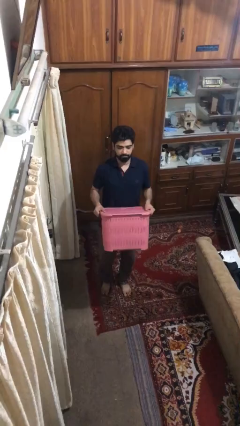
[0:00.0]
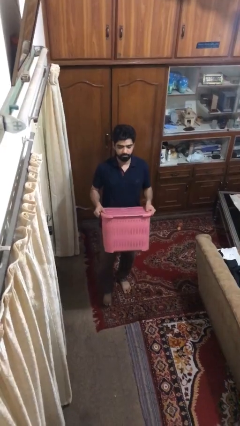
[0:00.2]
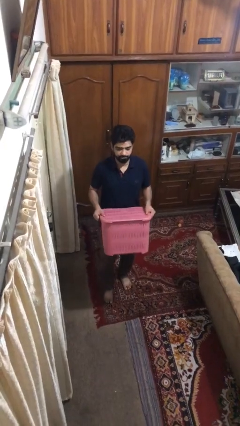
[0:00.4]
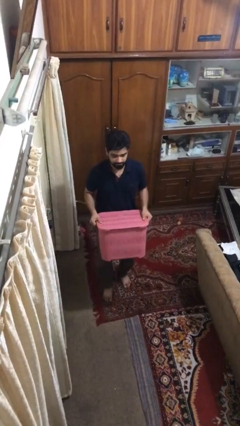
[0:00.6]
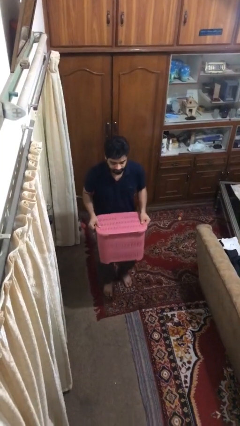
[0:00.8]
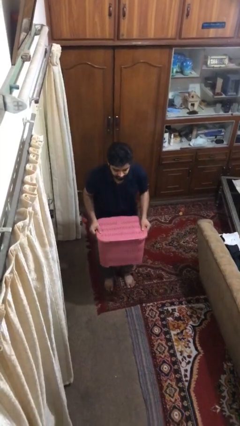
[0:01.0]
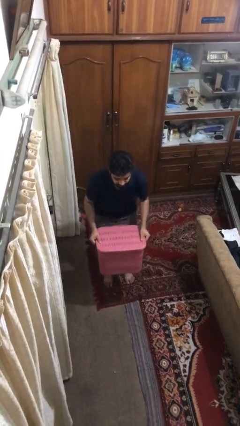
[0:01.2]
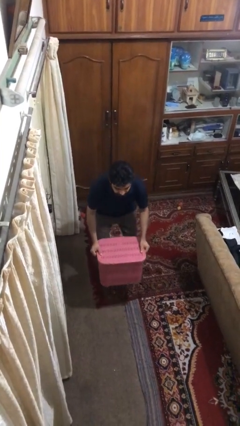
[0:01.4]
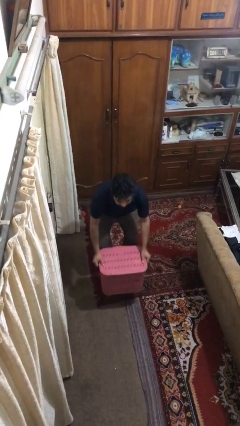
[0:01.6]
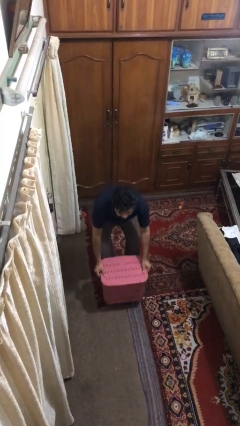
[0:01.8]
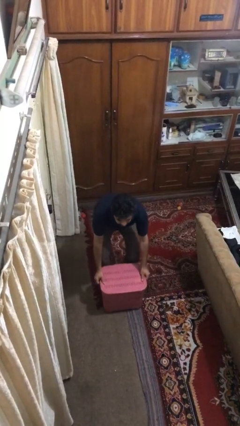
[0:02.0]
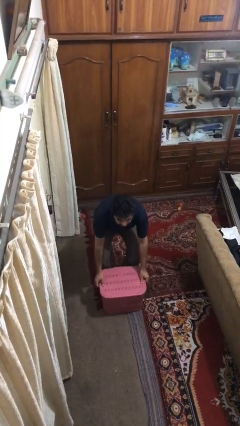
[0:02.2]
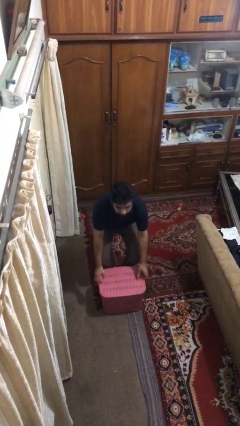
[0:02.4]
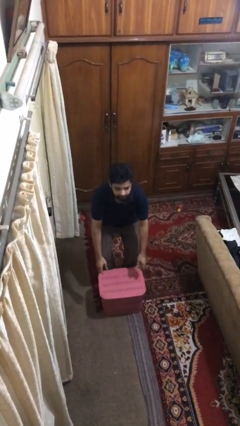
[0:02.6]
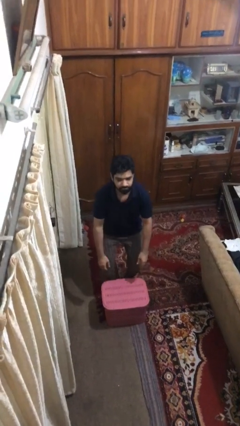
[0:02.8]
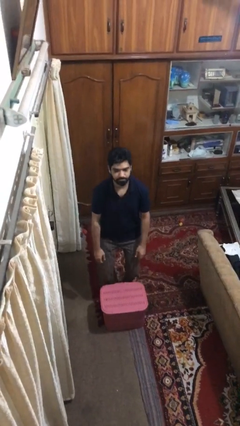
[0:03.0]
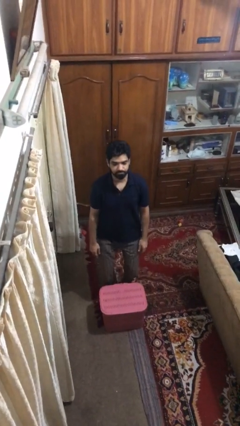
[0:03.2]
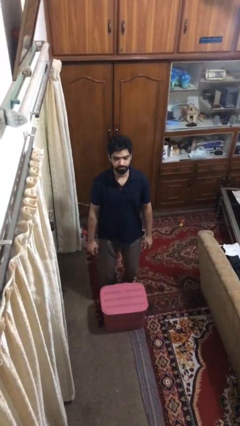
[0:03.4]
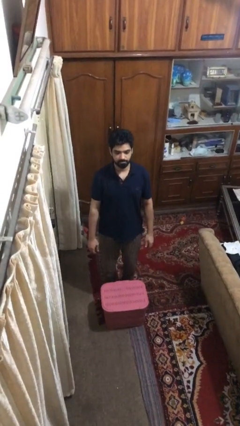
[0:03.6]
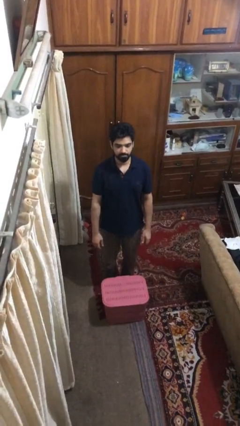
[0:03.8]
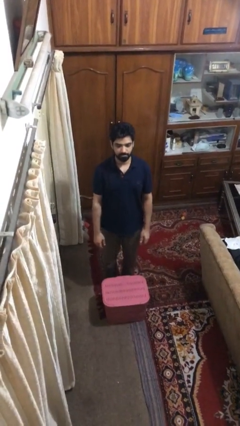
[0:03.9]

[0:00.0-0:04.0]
person puts down object on floor

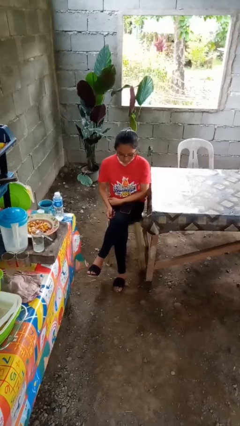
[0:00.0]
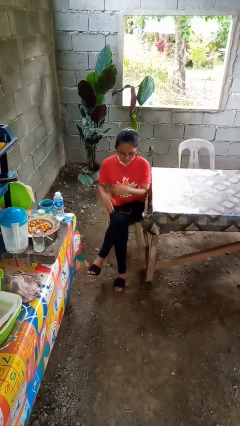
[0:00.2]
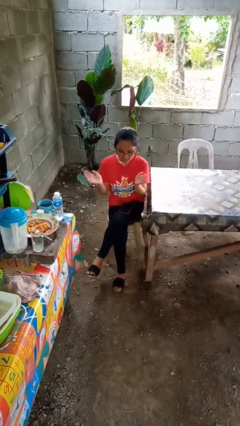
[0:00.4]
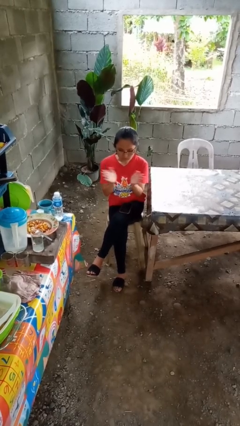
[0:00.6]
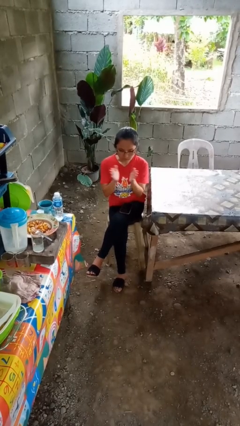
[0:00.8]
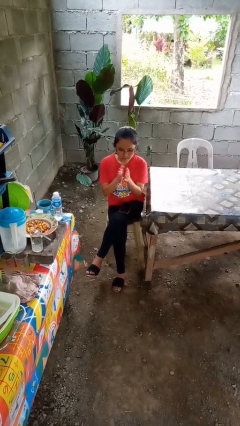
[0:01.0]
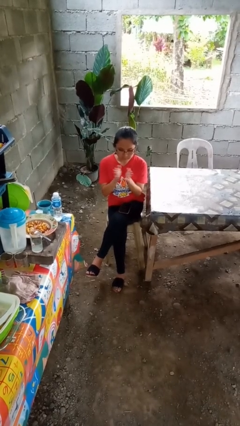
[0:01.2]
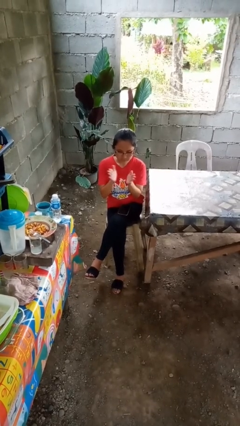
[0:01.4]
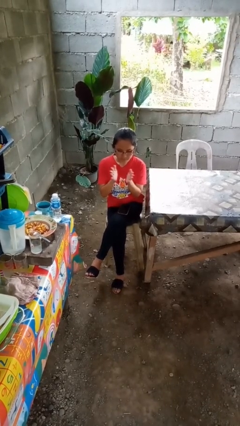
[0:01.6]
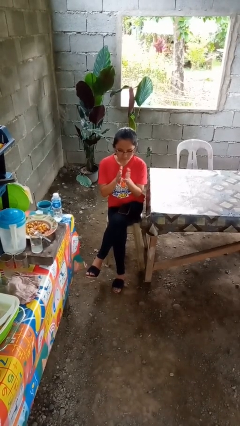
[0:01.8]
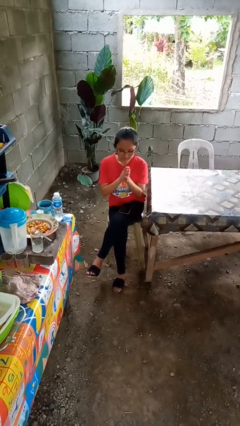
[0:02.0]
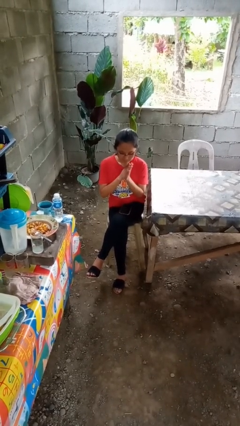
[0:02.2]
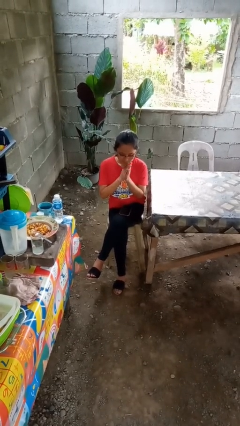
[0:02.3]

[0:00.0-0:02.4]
person claps hands

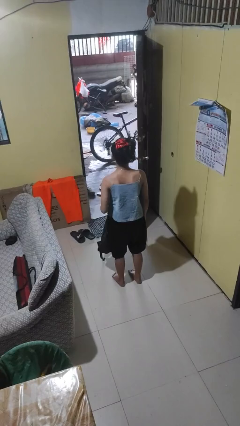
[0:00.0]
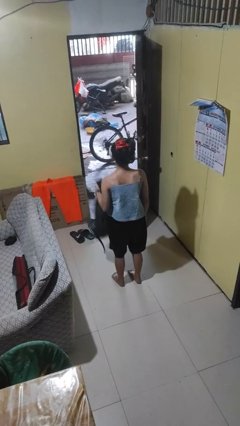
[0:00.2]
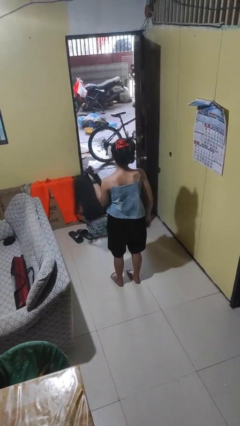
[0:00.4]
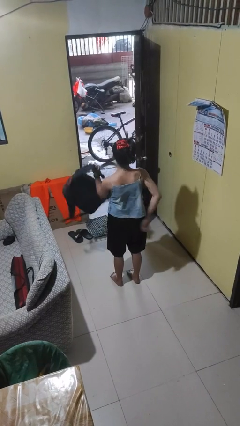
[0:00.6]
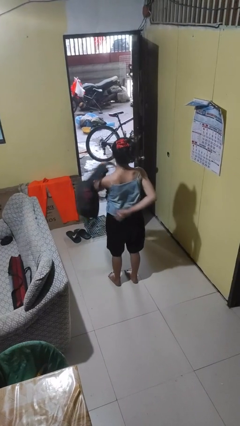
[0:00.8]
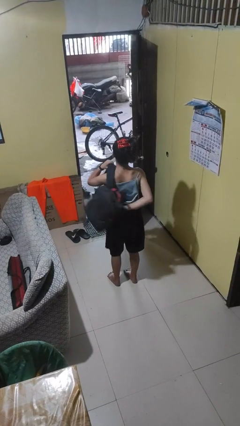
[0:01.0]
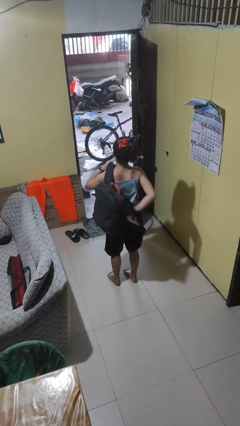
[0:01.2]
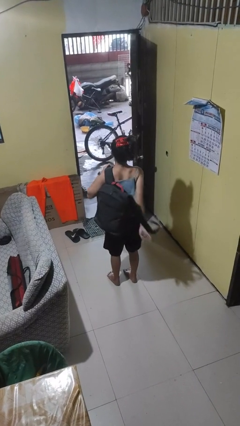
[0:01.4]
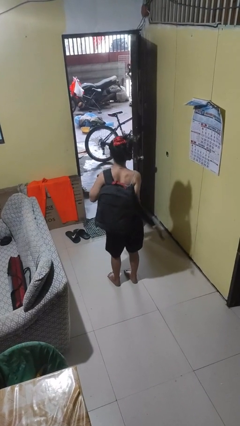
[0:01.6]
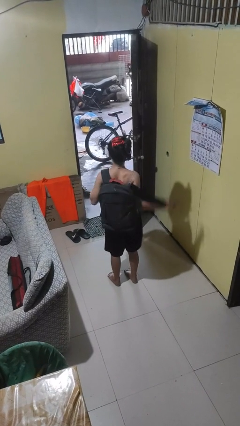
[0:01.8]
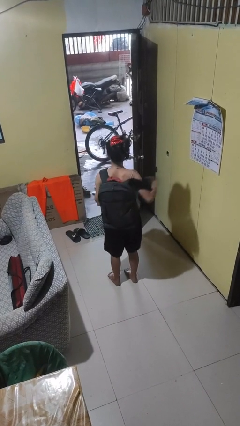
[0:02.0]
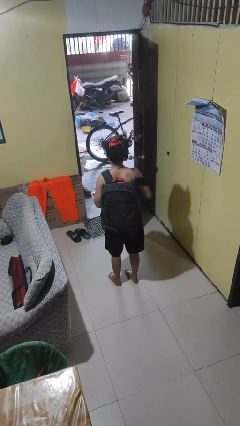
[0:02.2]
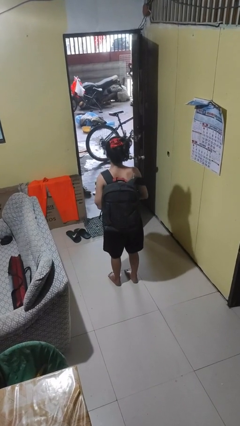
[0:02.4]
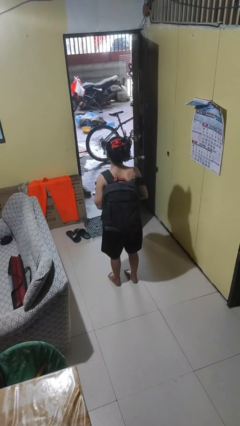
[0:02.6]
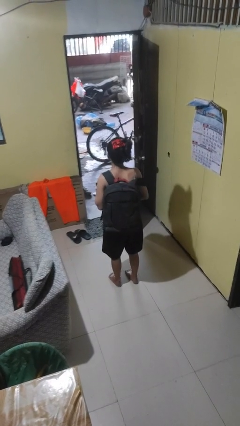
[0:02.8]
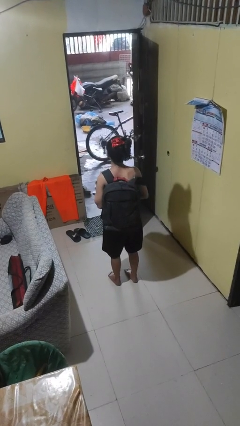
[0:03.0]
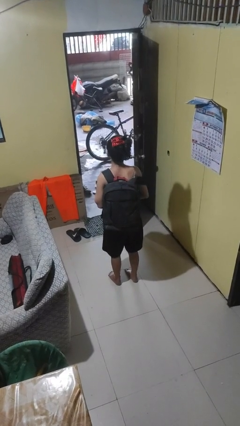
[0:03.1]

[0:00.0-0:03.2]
person puts on backpack

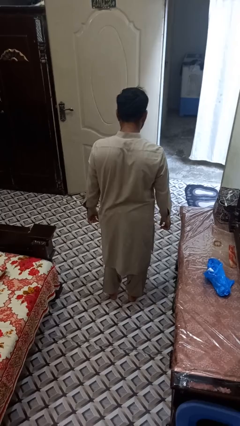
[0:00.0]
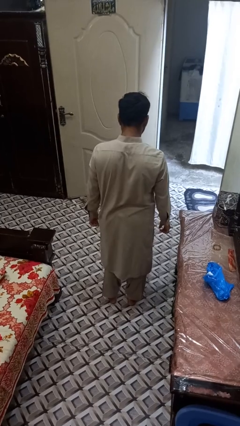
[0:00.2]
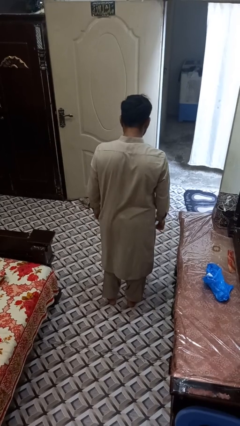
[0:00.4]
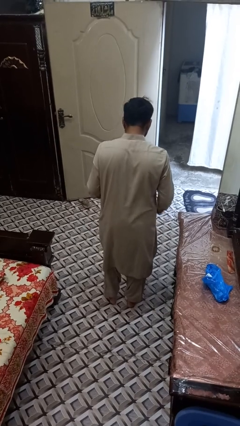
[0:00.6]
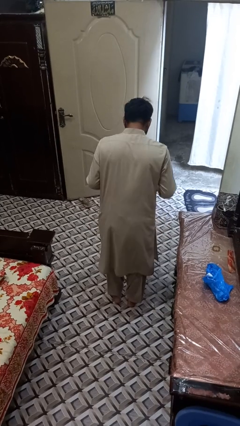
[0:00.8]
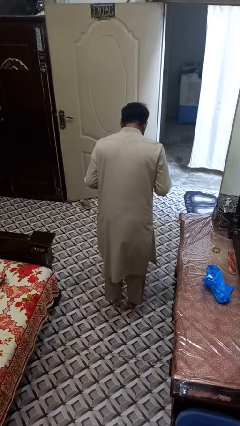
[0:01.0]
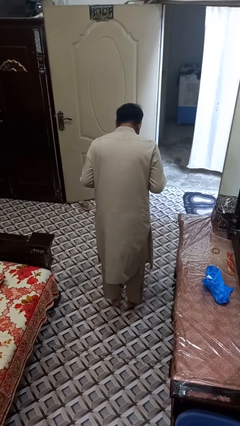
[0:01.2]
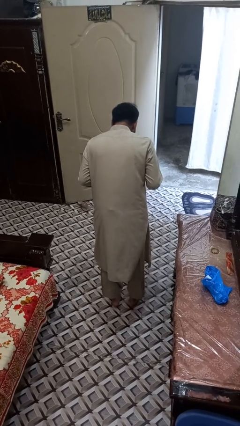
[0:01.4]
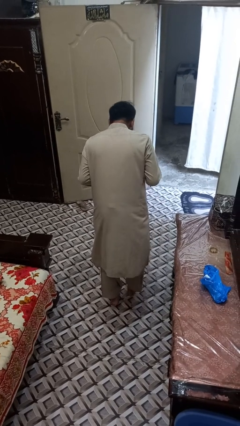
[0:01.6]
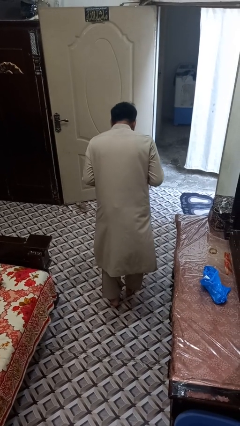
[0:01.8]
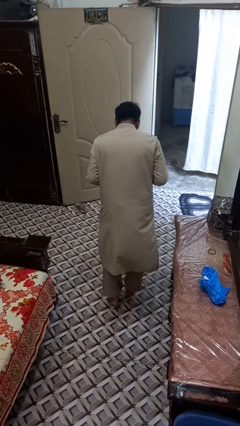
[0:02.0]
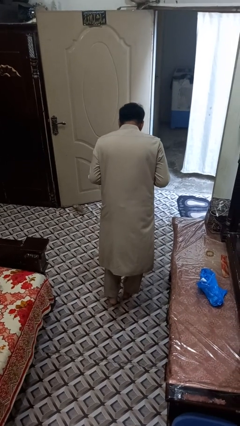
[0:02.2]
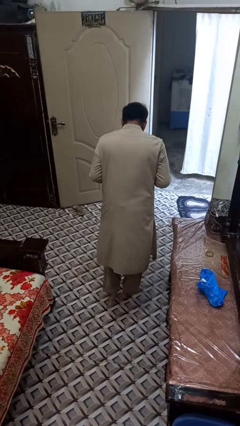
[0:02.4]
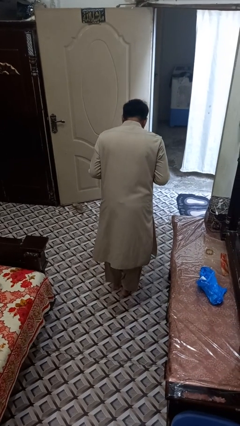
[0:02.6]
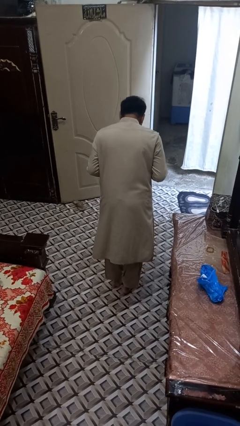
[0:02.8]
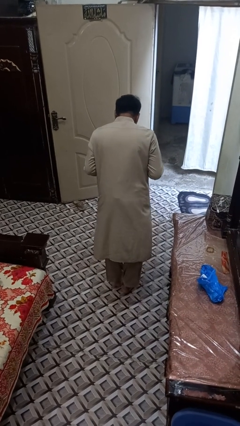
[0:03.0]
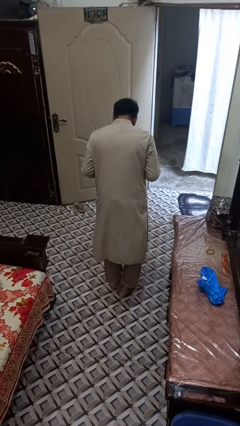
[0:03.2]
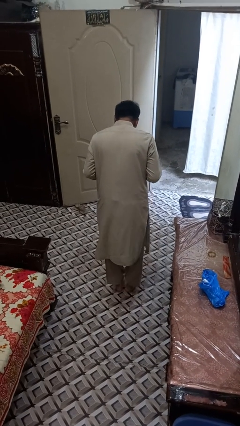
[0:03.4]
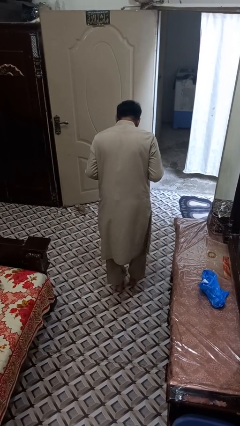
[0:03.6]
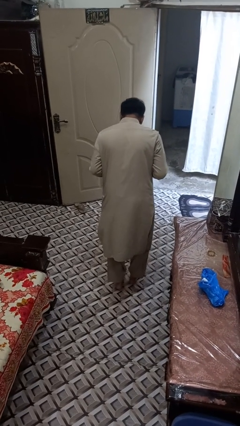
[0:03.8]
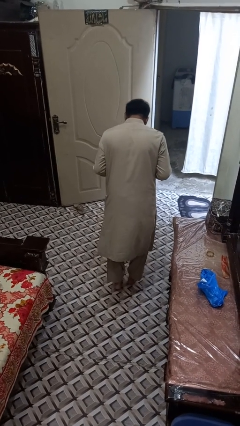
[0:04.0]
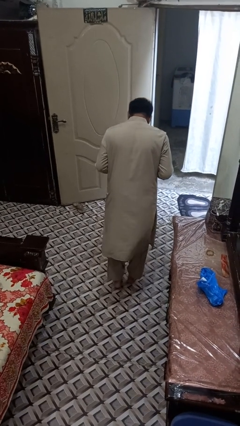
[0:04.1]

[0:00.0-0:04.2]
person walks tiptoe

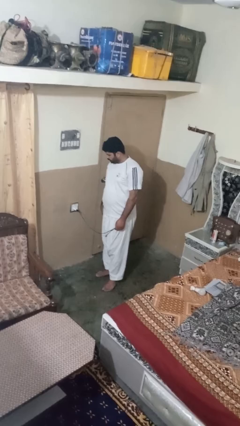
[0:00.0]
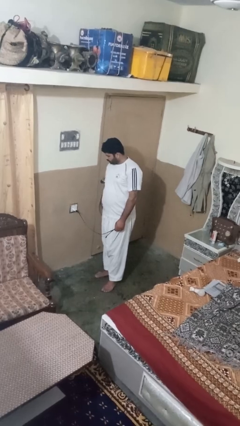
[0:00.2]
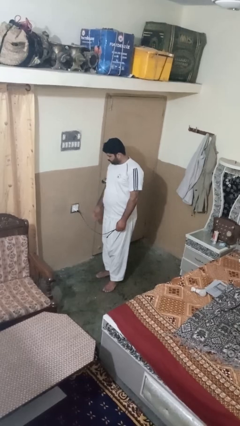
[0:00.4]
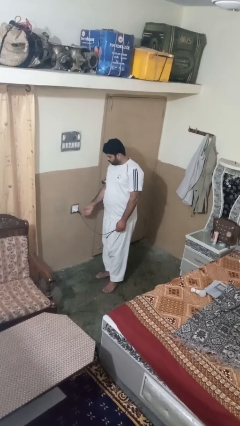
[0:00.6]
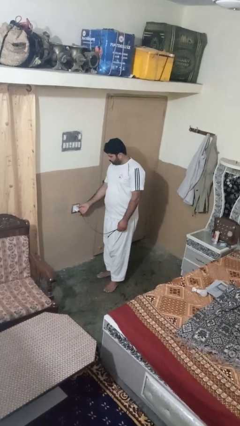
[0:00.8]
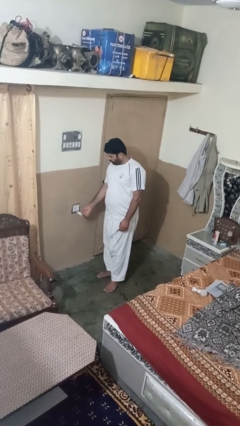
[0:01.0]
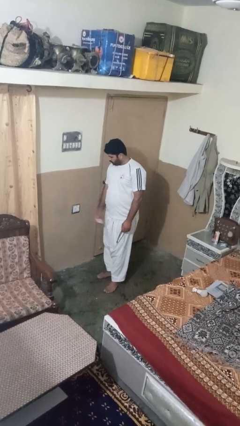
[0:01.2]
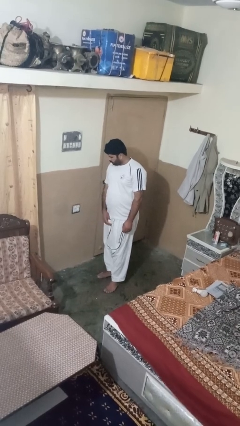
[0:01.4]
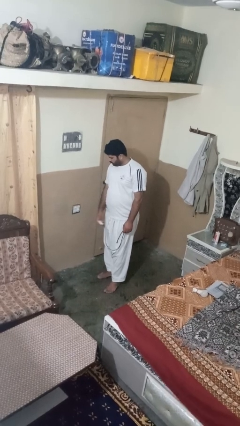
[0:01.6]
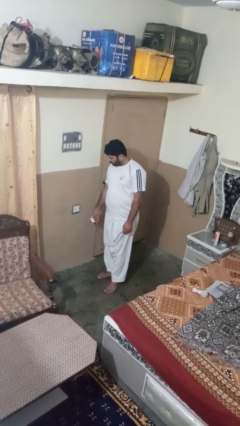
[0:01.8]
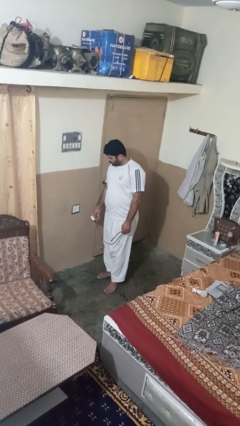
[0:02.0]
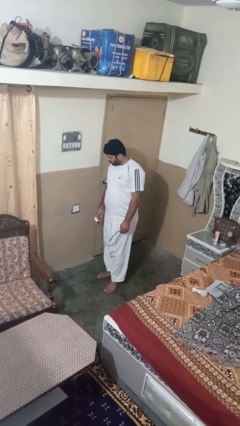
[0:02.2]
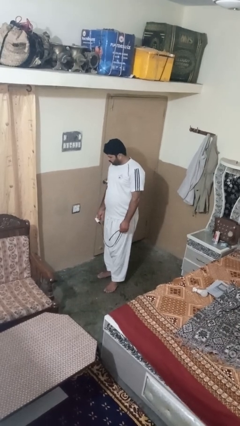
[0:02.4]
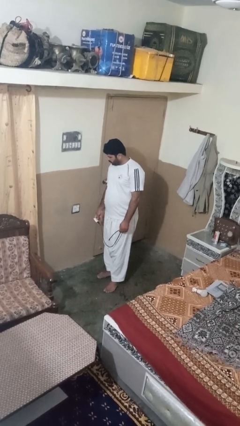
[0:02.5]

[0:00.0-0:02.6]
person unplugs from electrical socket

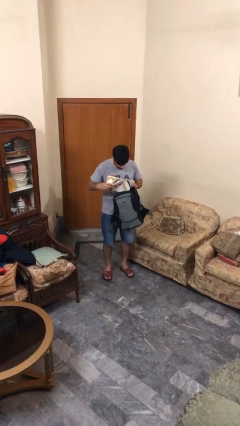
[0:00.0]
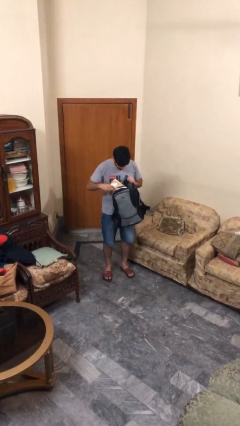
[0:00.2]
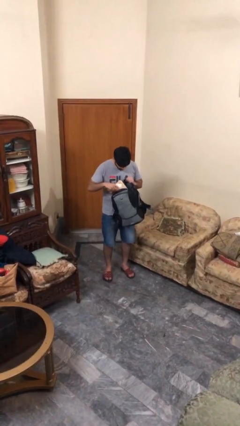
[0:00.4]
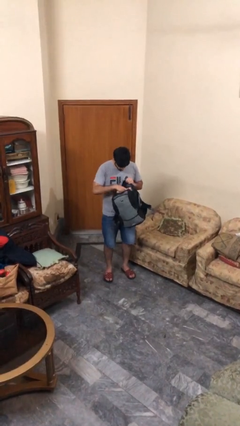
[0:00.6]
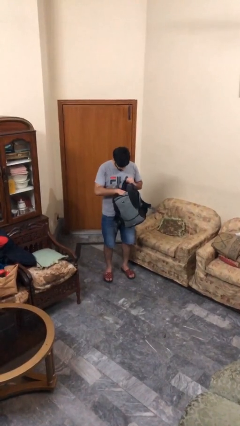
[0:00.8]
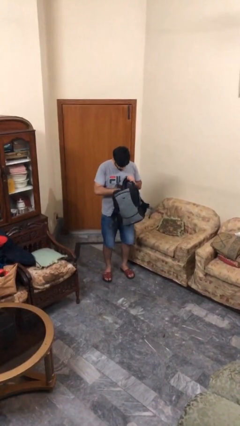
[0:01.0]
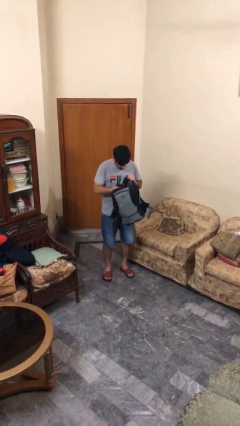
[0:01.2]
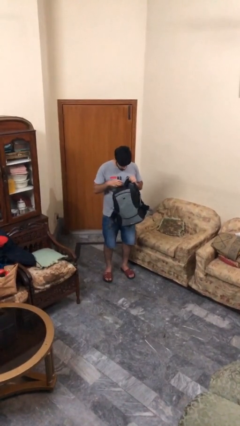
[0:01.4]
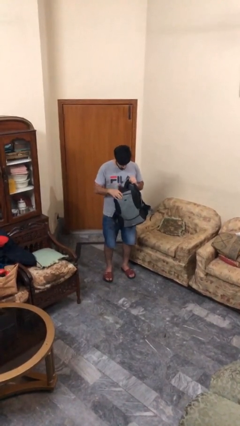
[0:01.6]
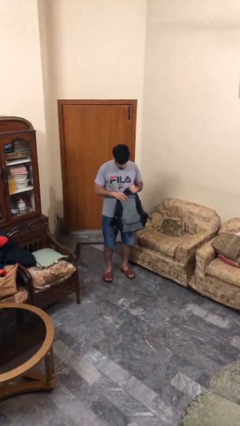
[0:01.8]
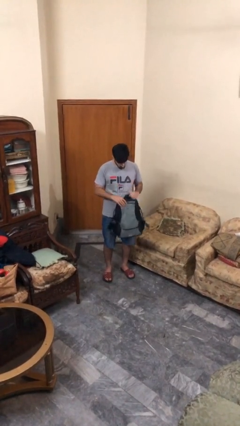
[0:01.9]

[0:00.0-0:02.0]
person puts object into backpack
